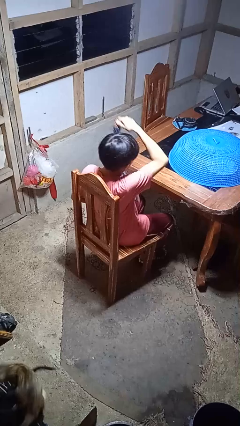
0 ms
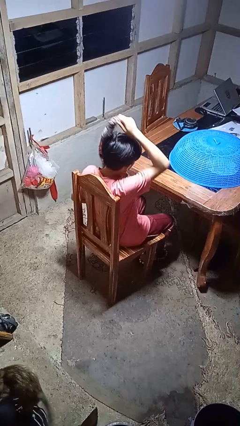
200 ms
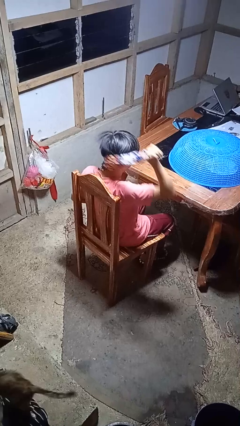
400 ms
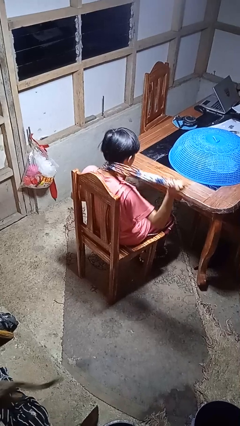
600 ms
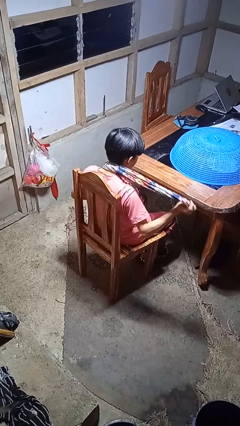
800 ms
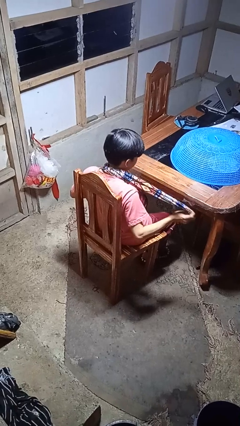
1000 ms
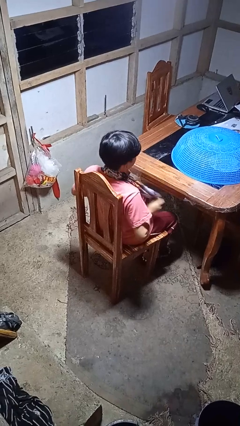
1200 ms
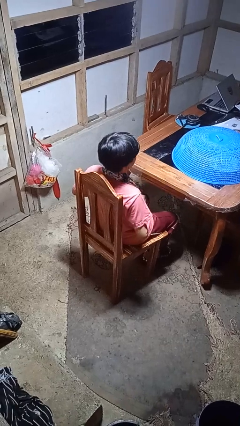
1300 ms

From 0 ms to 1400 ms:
person puts on scarf

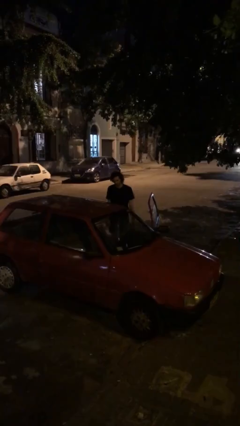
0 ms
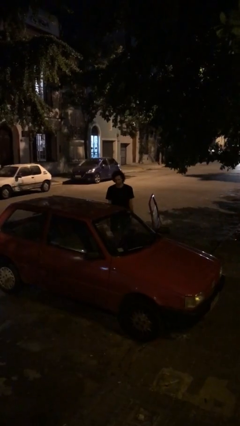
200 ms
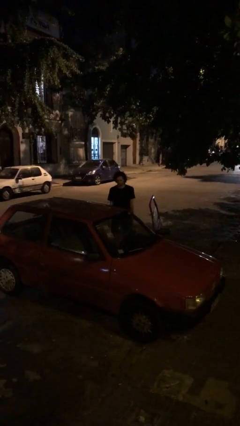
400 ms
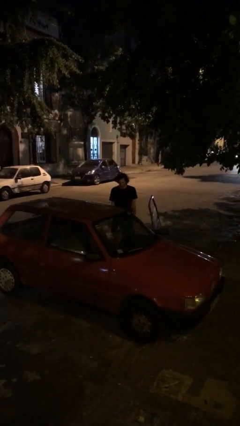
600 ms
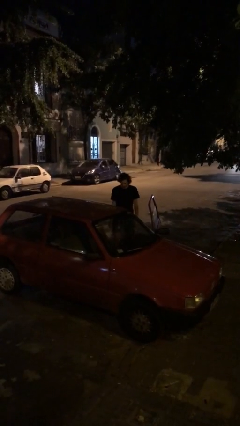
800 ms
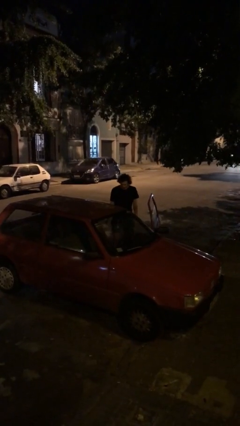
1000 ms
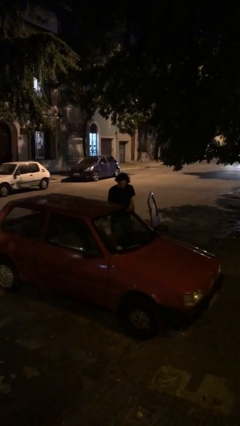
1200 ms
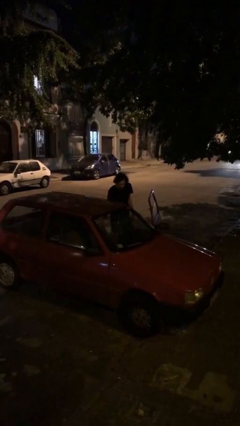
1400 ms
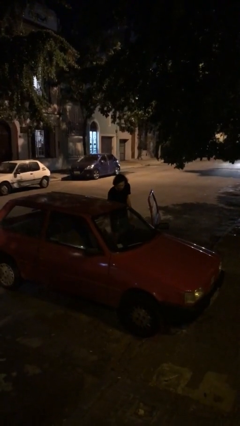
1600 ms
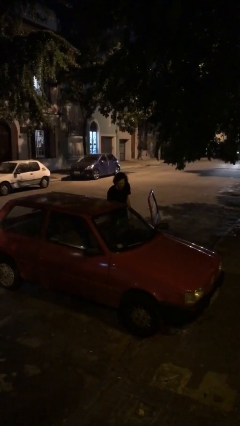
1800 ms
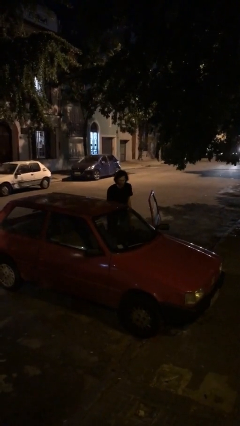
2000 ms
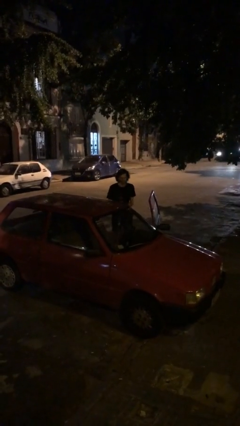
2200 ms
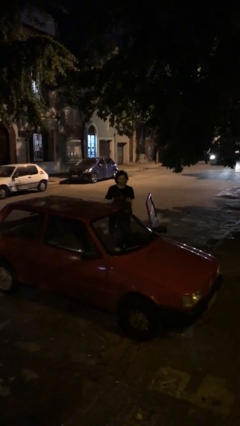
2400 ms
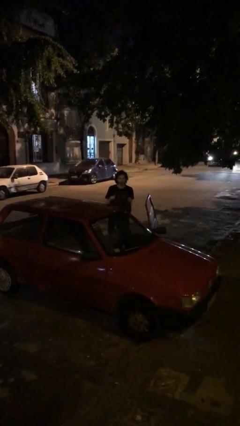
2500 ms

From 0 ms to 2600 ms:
person unloads car

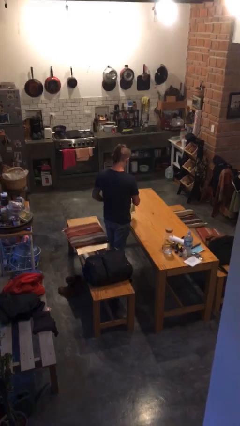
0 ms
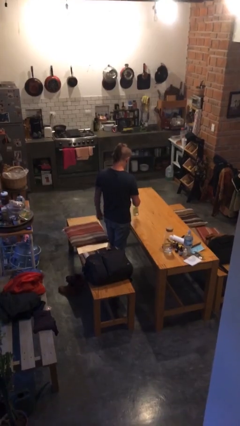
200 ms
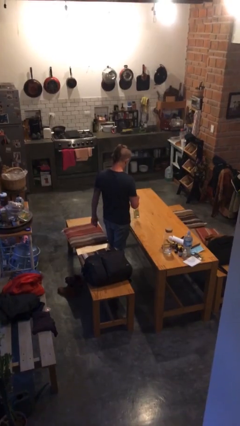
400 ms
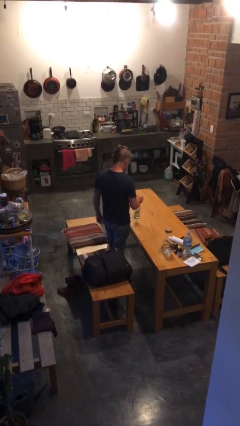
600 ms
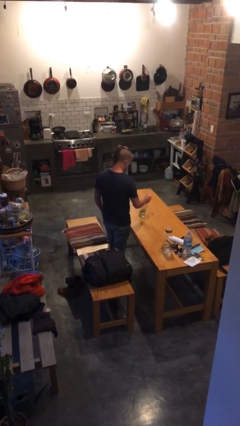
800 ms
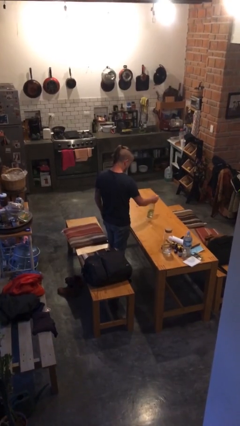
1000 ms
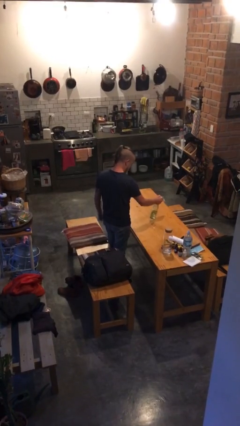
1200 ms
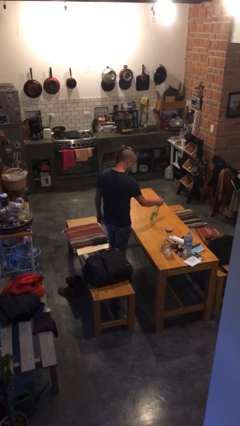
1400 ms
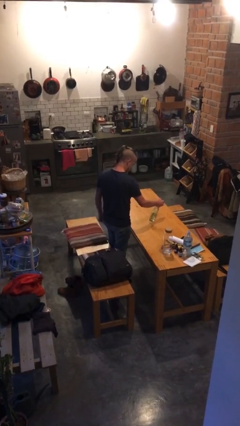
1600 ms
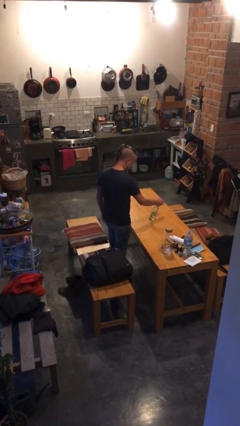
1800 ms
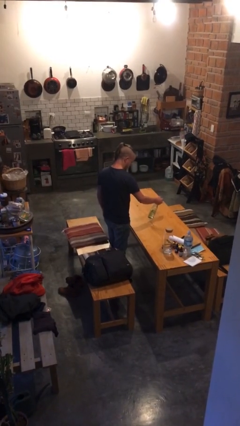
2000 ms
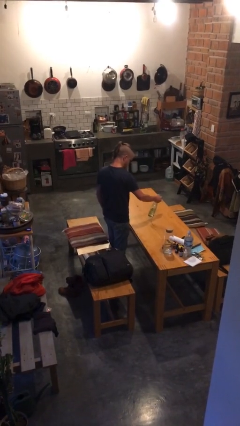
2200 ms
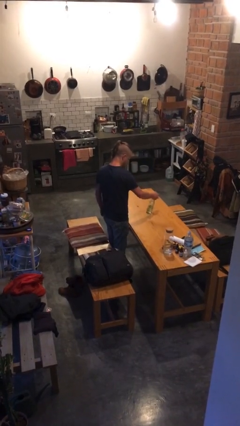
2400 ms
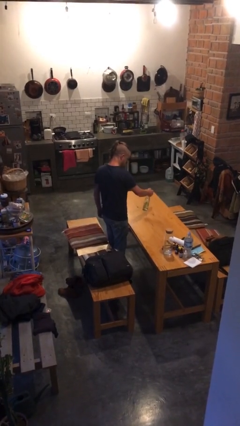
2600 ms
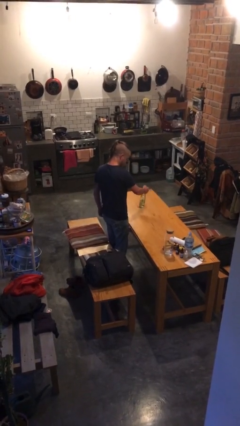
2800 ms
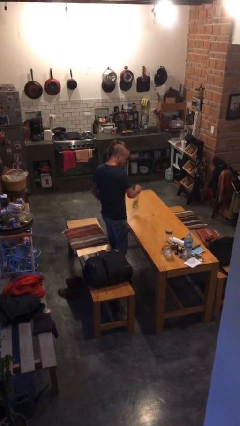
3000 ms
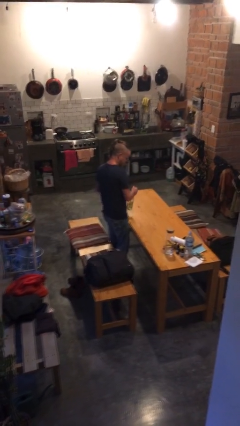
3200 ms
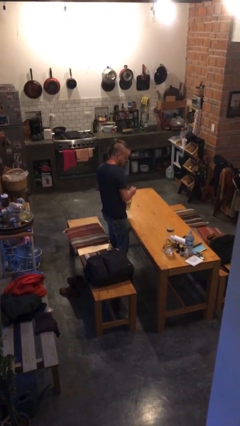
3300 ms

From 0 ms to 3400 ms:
person sprays from bottle

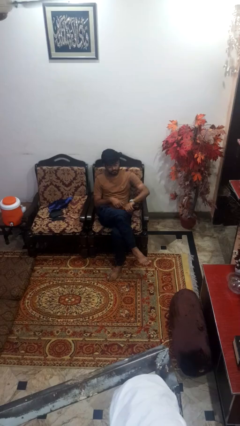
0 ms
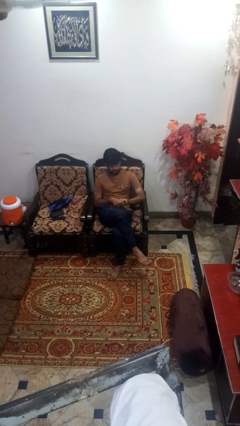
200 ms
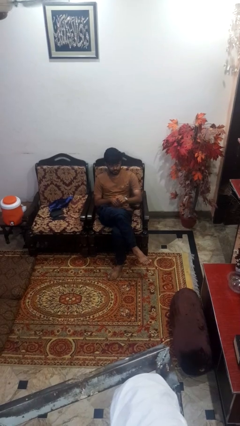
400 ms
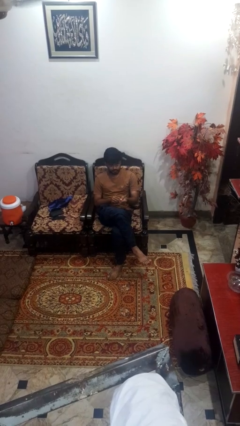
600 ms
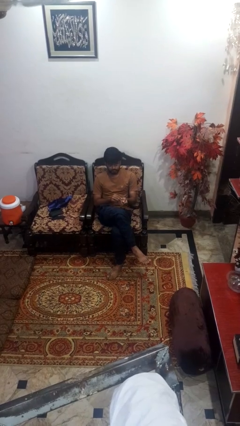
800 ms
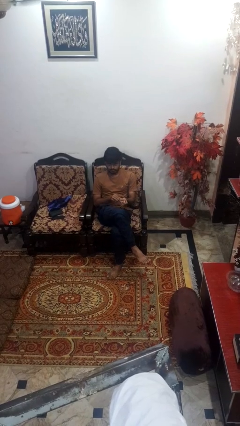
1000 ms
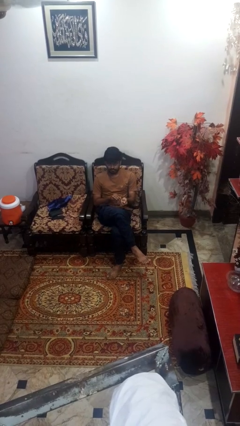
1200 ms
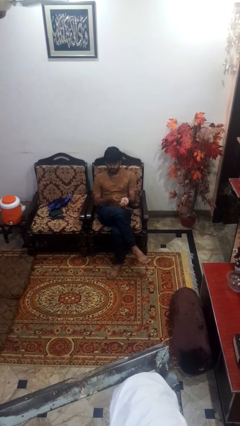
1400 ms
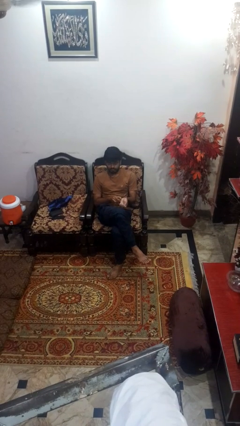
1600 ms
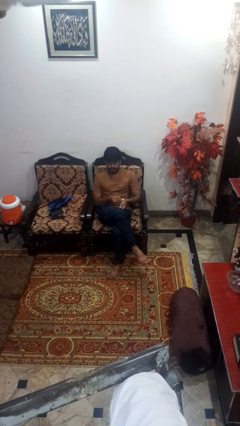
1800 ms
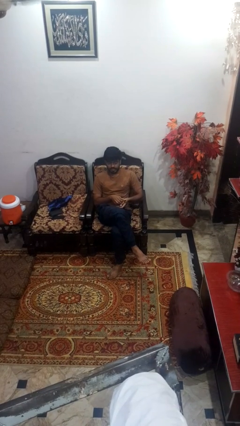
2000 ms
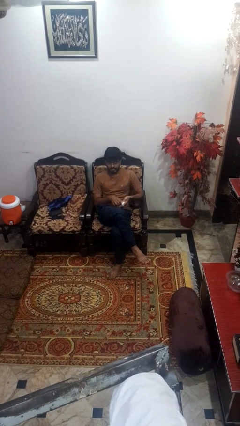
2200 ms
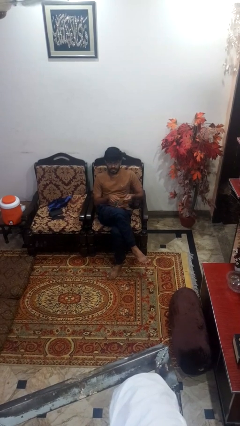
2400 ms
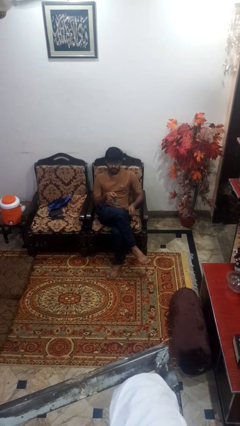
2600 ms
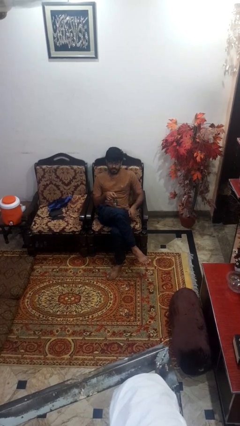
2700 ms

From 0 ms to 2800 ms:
person takes off wristwatch

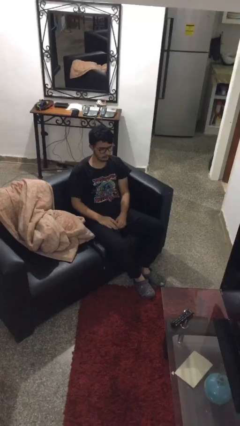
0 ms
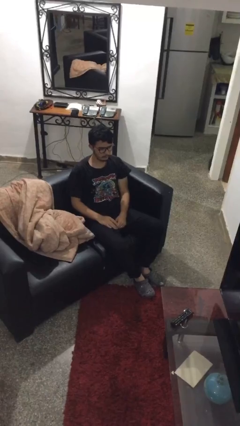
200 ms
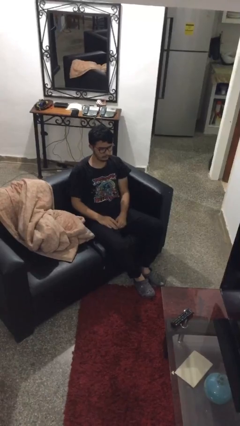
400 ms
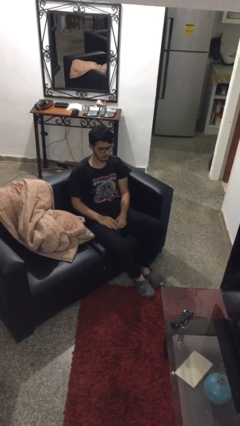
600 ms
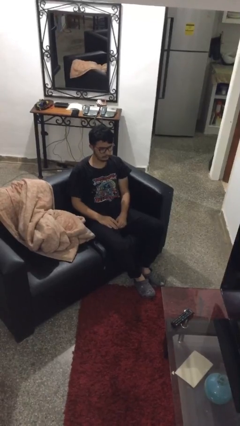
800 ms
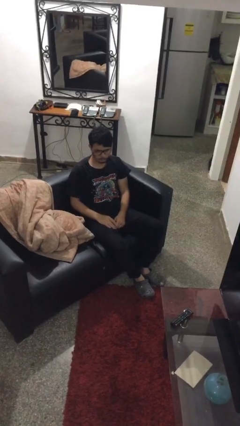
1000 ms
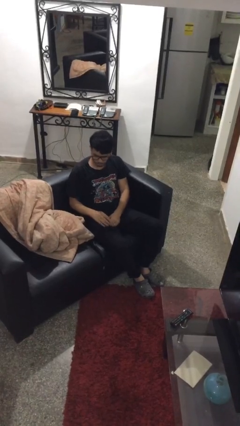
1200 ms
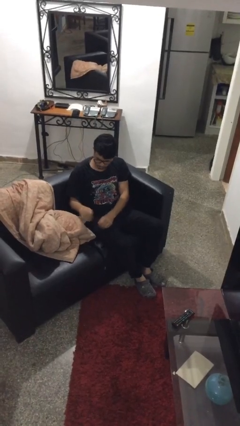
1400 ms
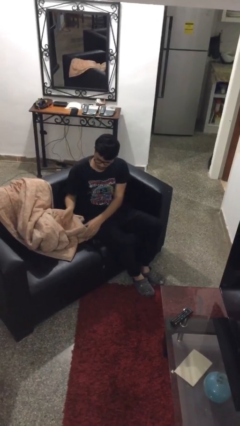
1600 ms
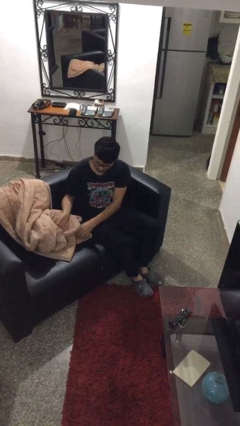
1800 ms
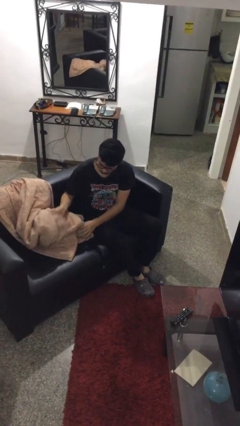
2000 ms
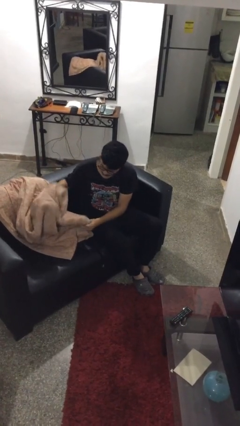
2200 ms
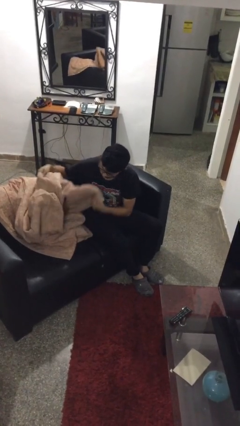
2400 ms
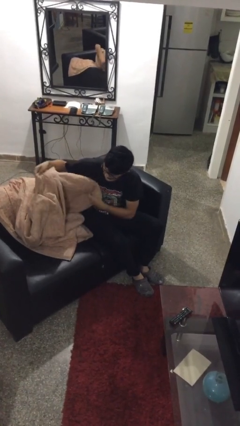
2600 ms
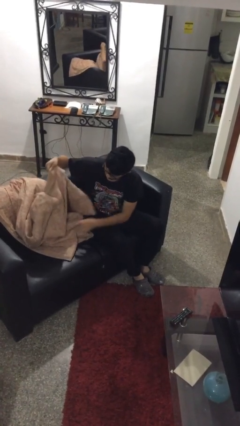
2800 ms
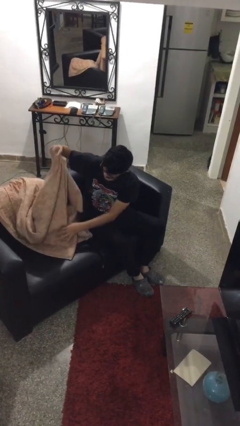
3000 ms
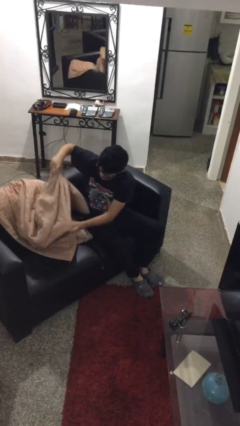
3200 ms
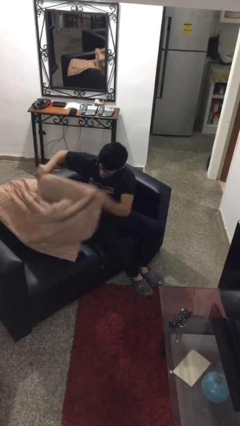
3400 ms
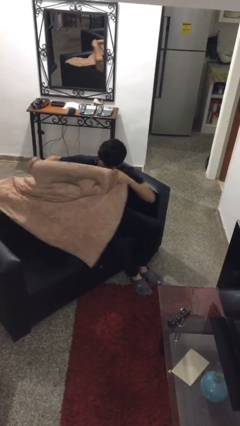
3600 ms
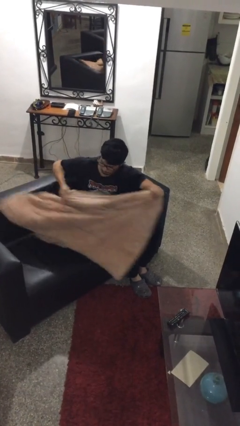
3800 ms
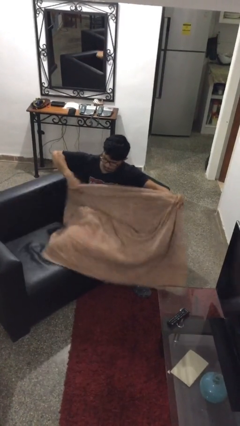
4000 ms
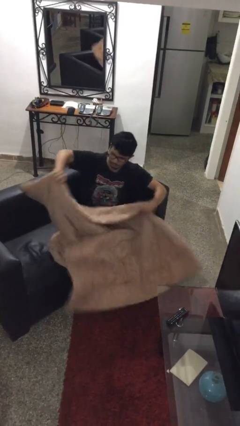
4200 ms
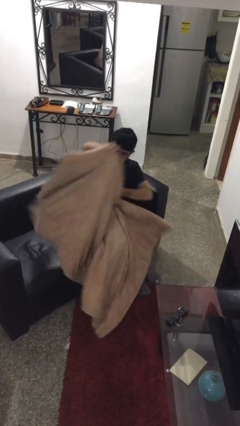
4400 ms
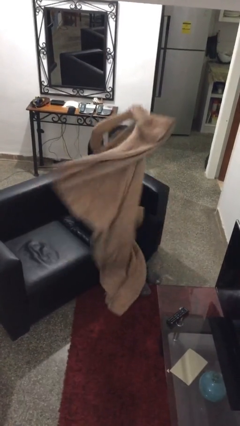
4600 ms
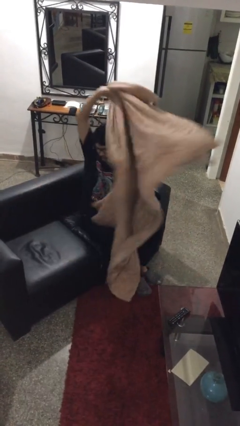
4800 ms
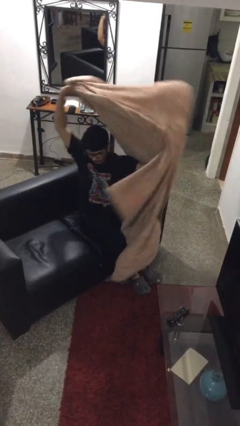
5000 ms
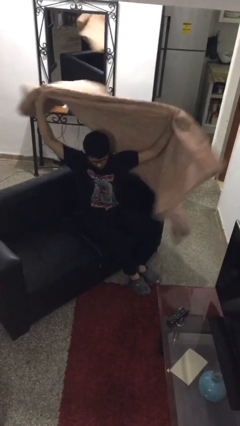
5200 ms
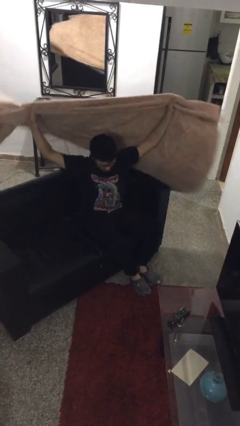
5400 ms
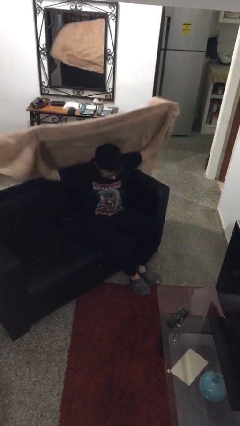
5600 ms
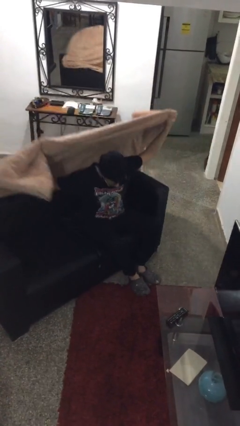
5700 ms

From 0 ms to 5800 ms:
person covers with blanket

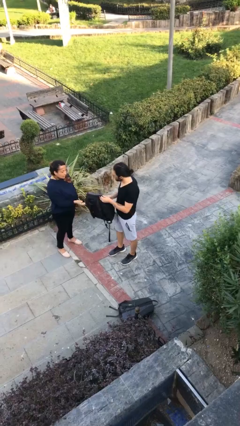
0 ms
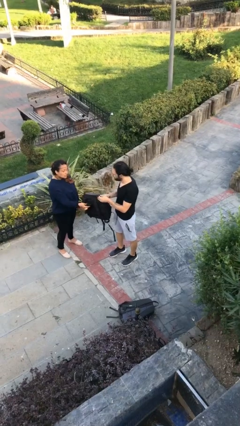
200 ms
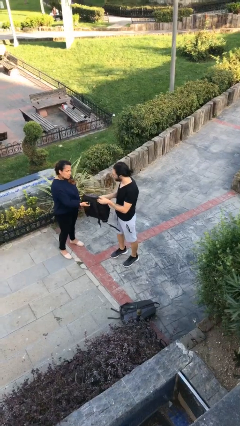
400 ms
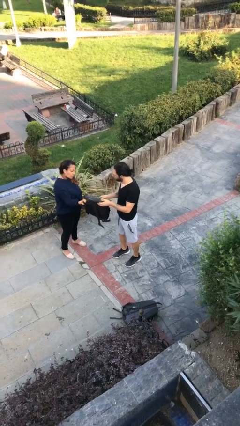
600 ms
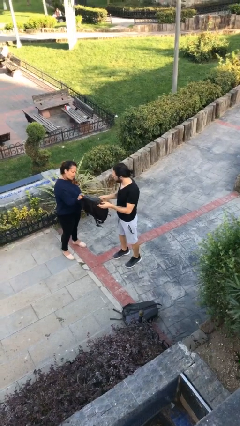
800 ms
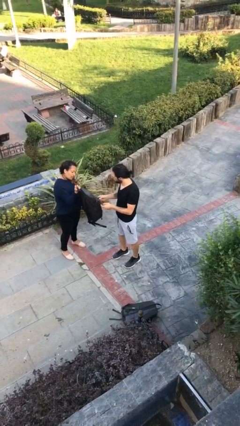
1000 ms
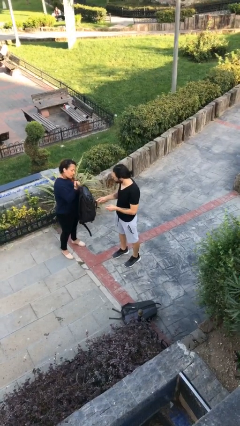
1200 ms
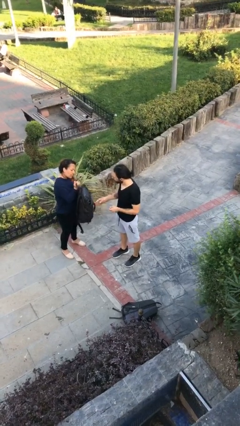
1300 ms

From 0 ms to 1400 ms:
person transfers object to person
